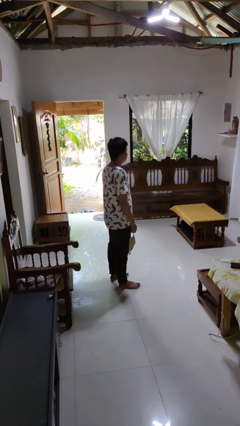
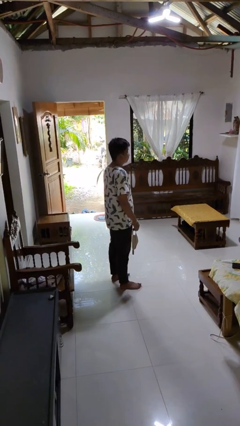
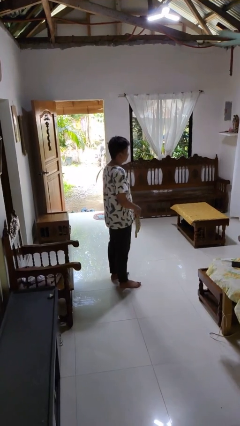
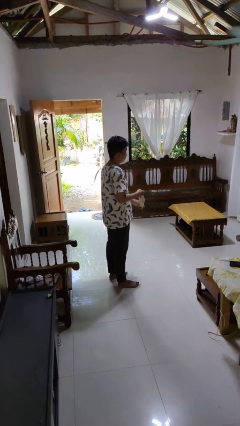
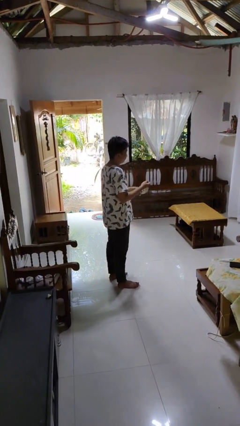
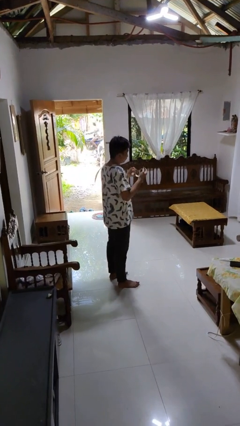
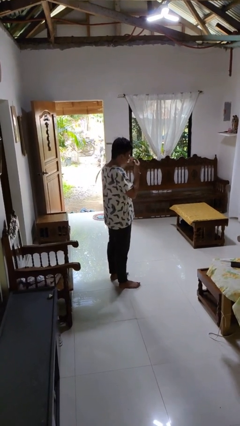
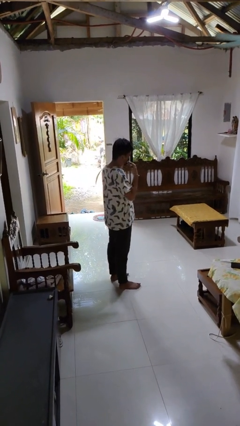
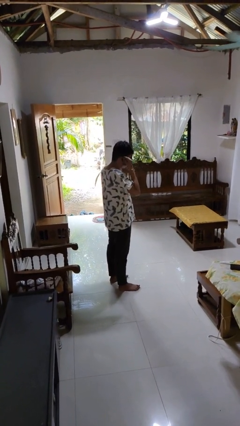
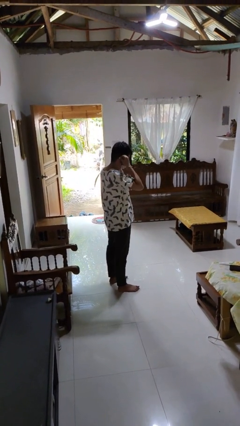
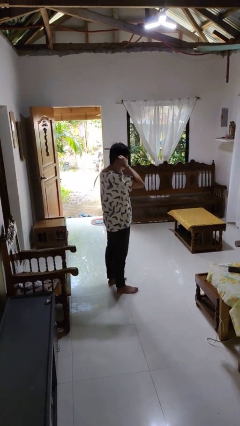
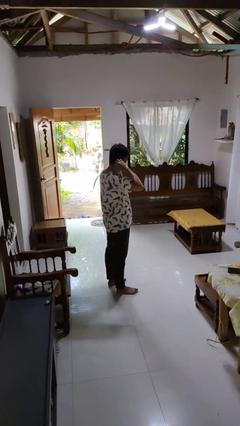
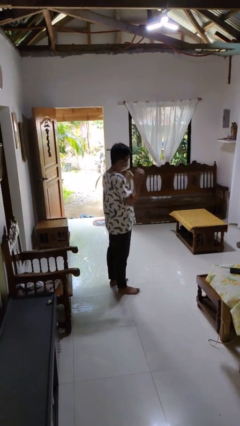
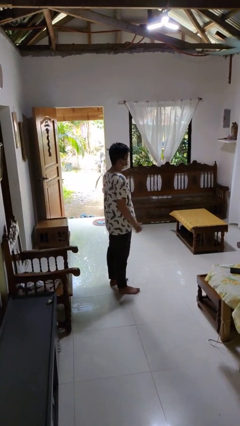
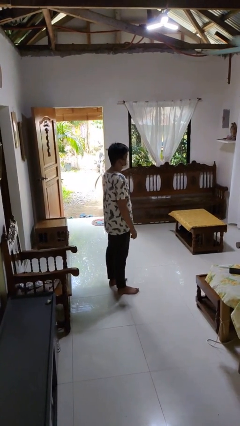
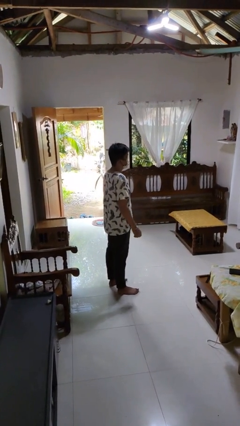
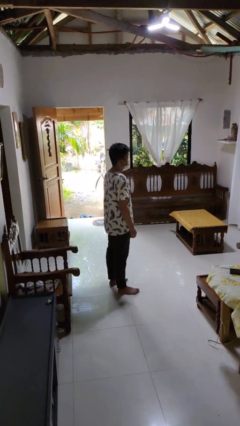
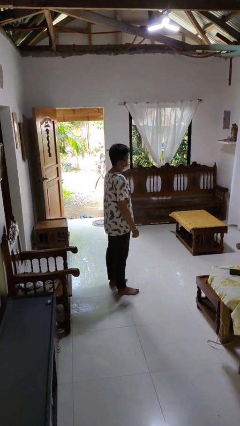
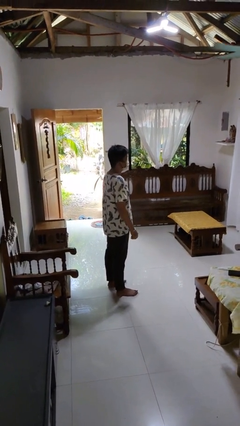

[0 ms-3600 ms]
person puts on facemask

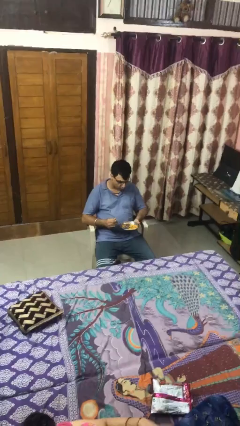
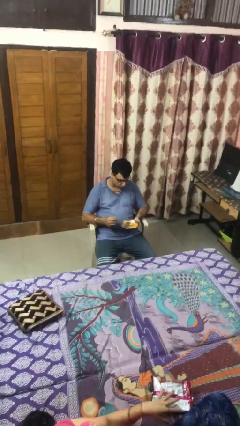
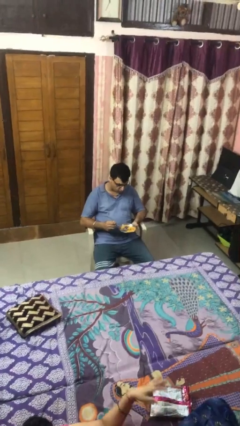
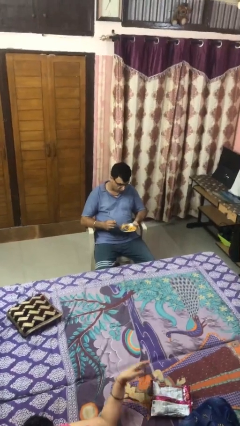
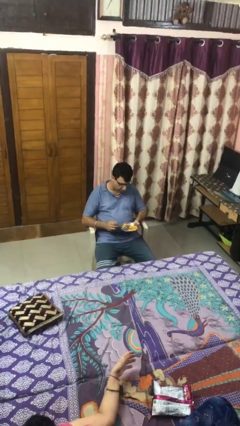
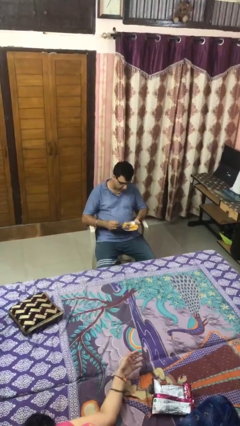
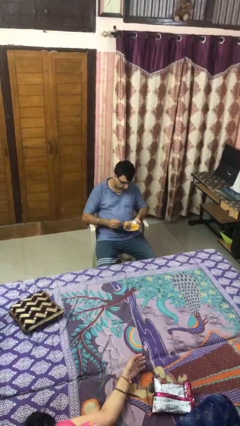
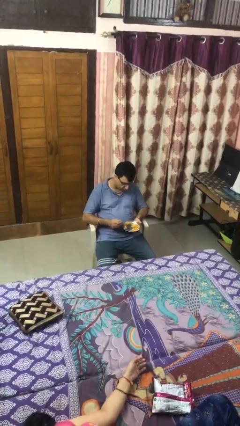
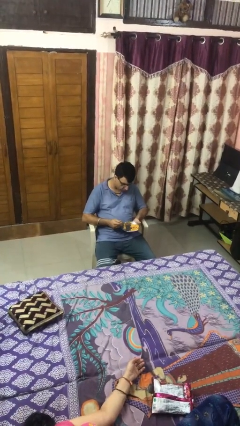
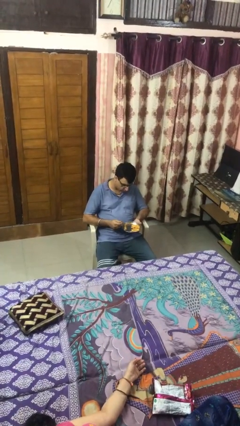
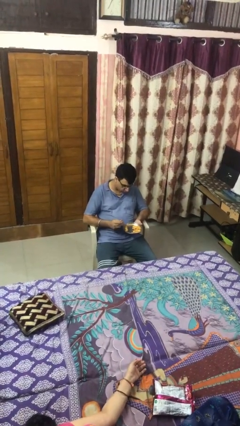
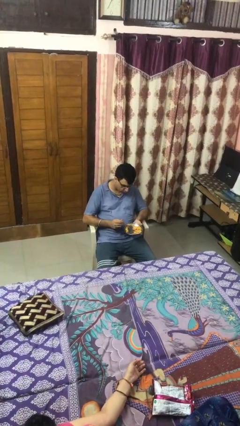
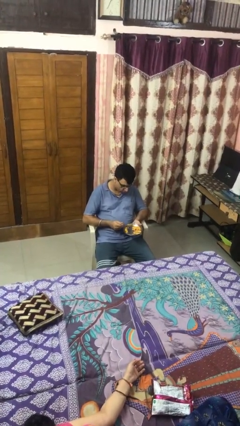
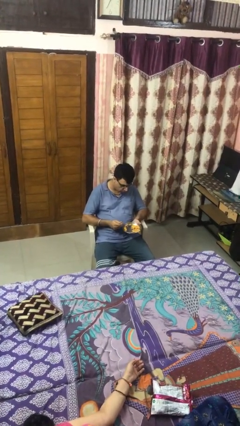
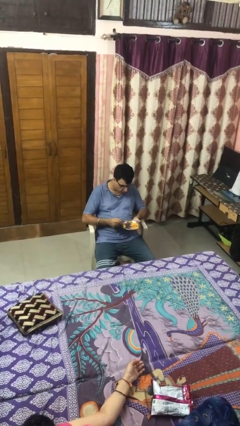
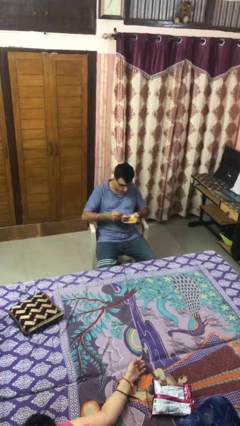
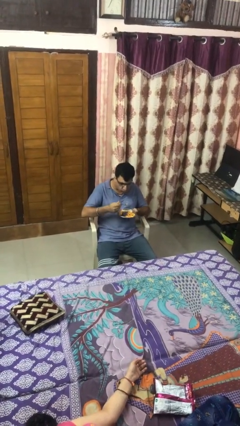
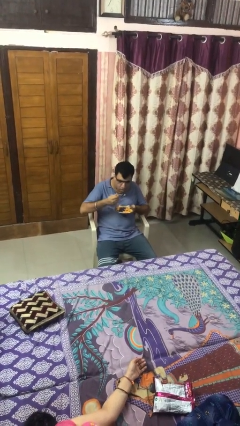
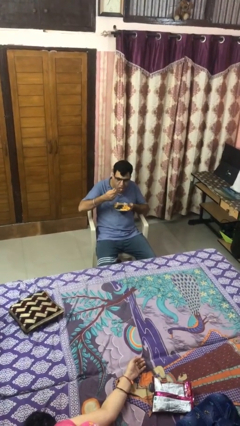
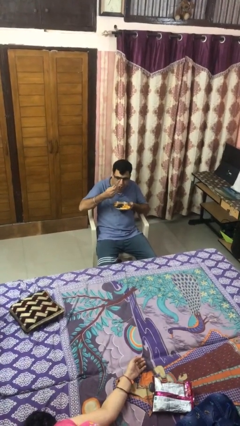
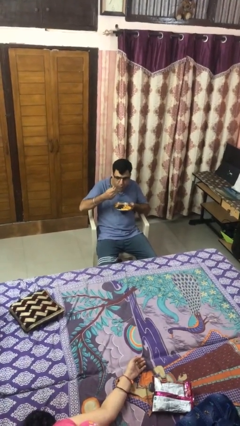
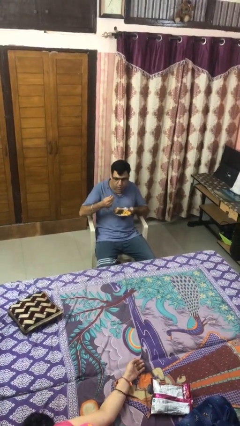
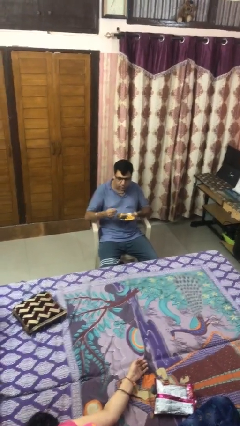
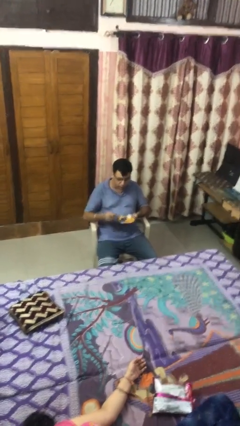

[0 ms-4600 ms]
person eats with utensil

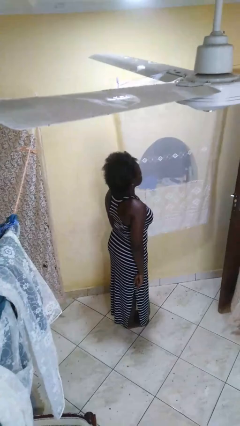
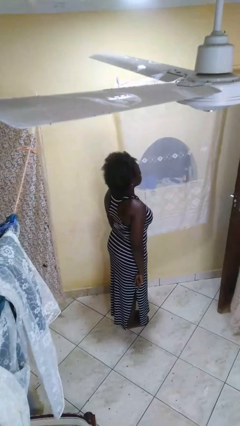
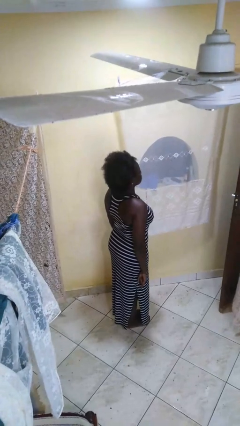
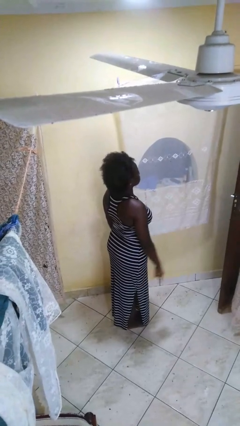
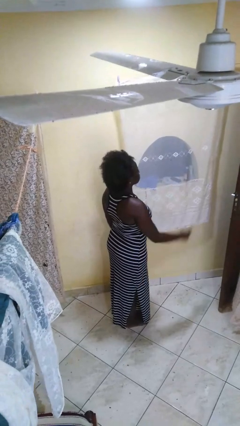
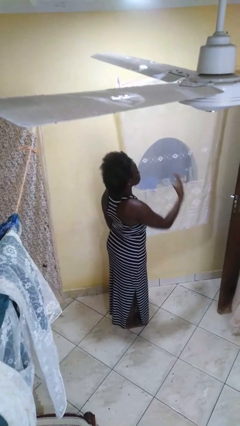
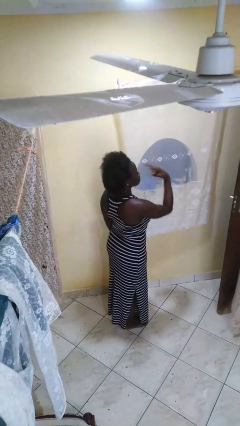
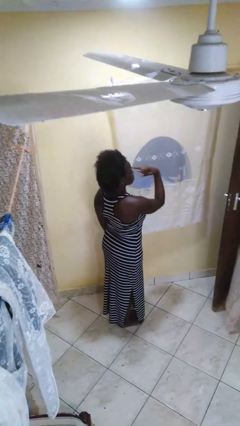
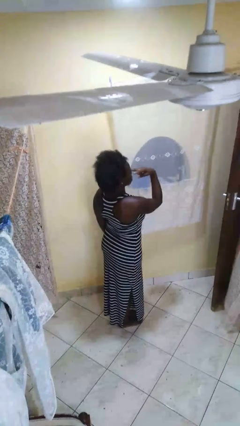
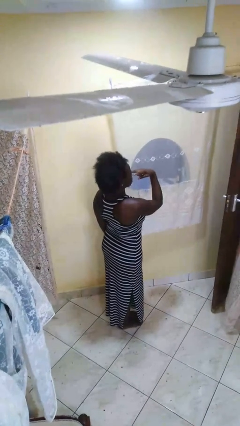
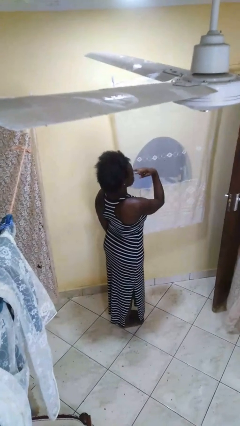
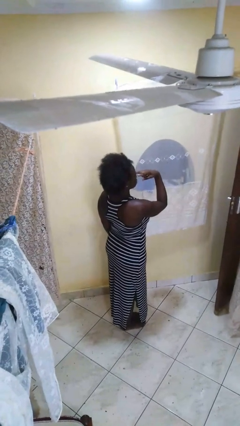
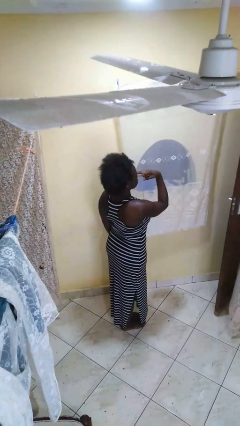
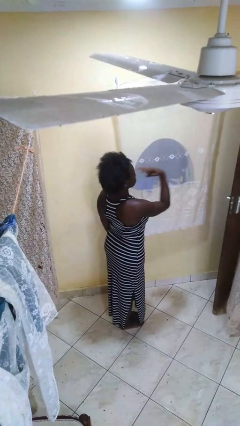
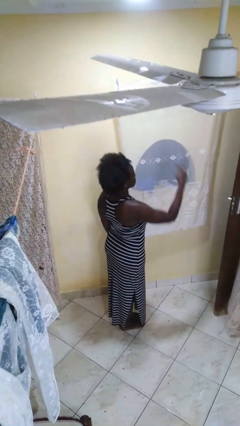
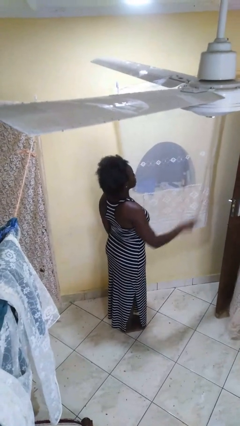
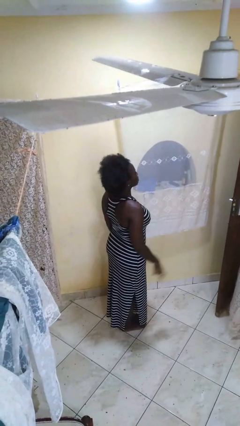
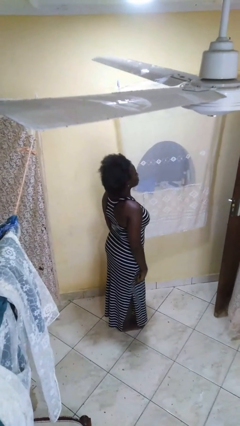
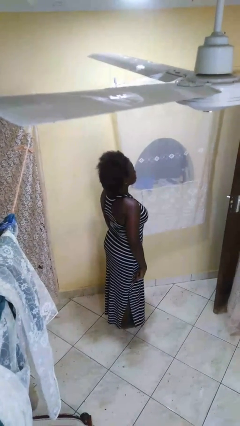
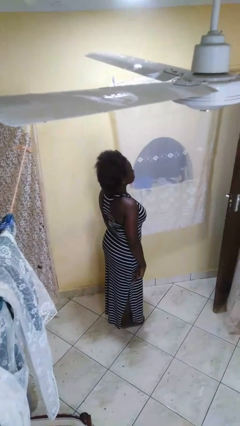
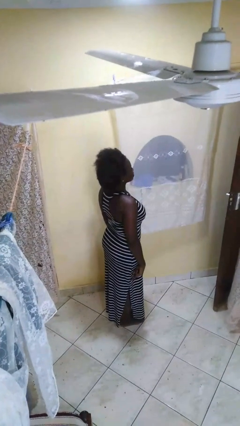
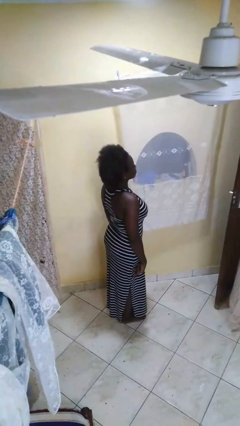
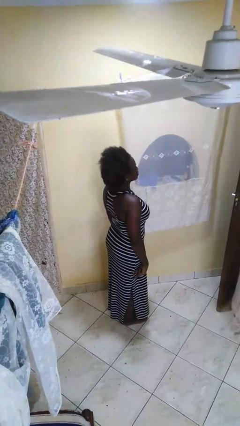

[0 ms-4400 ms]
person gestures watch closely

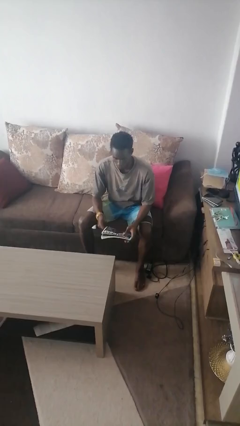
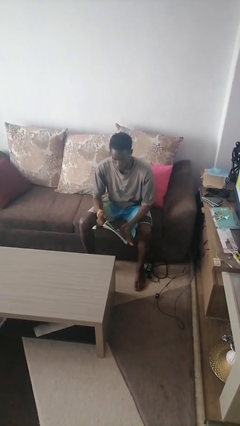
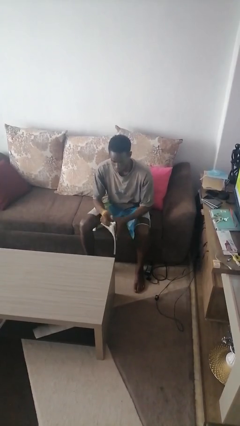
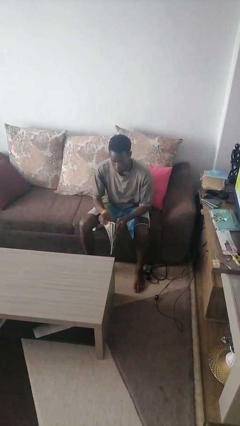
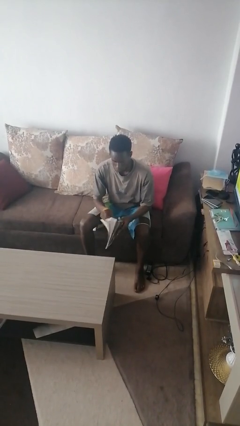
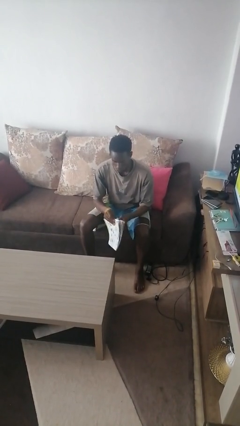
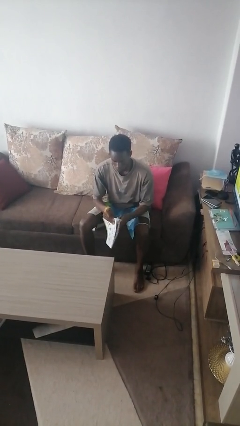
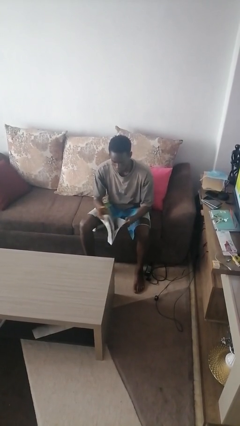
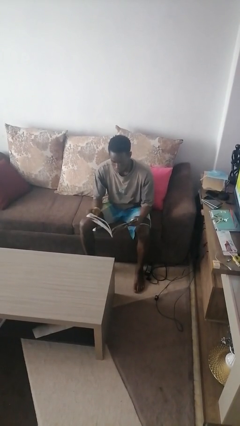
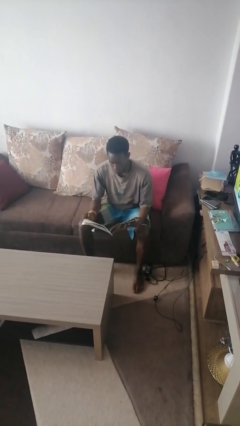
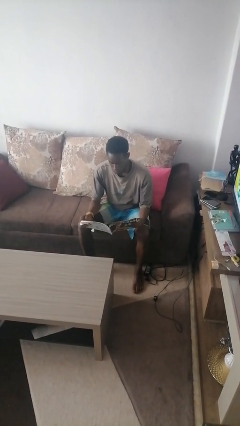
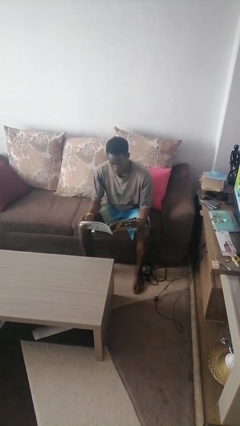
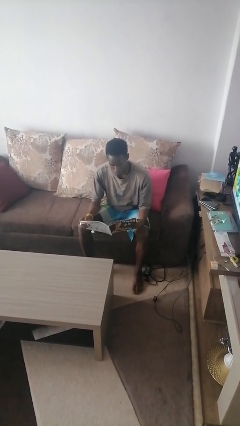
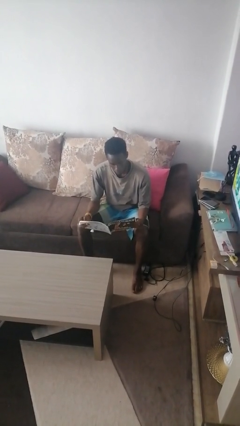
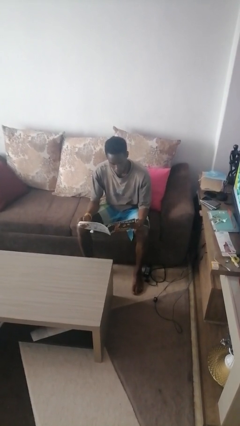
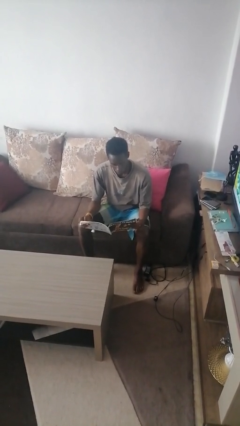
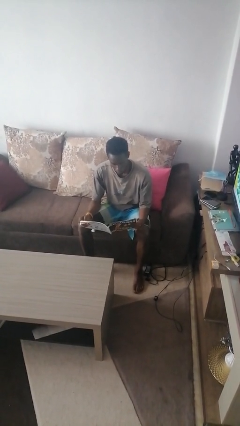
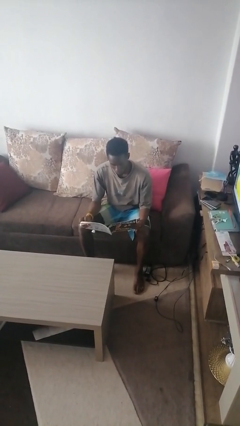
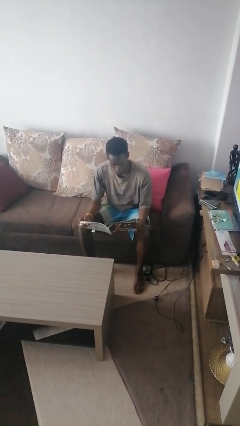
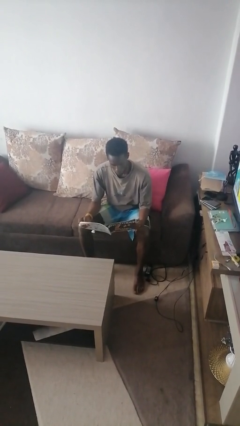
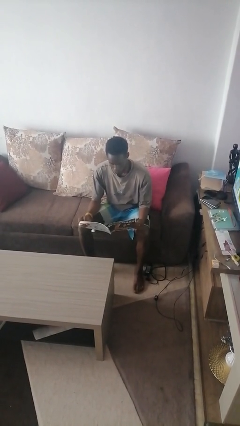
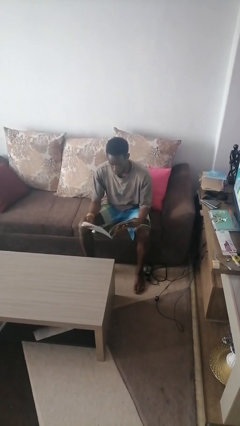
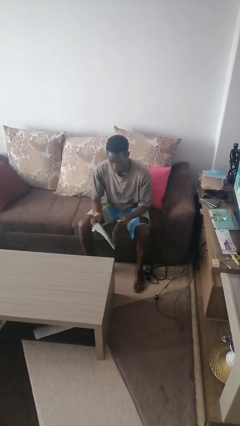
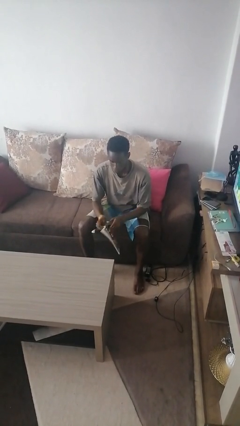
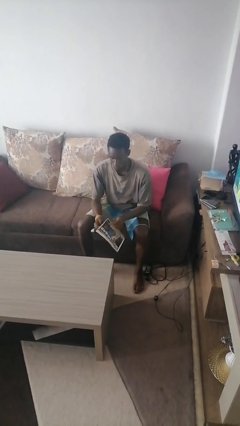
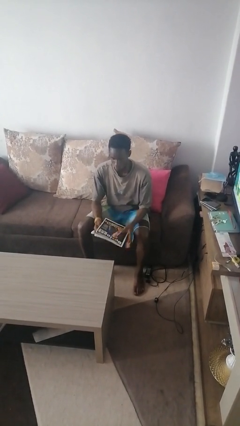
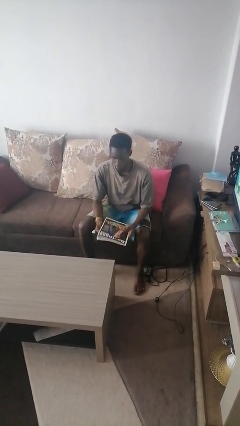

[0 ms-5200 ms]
person reads magazine
